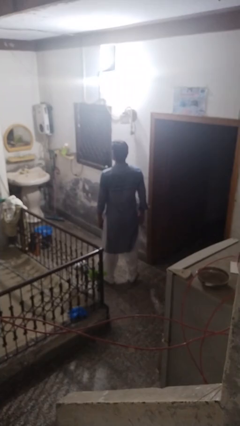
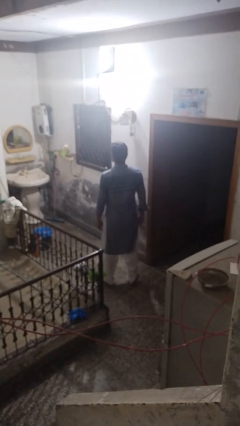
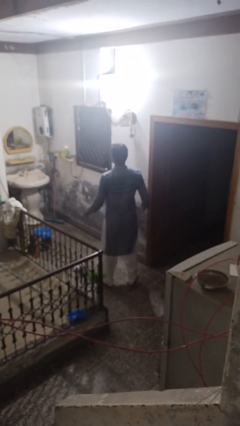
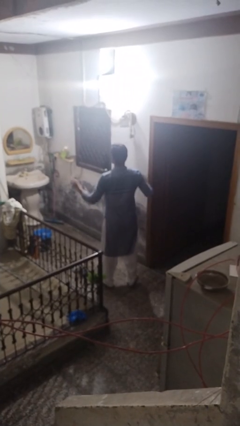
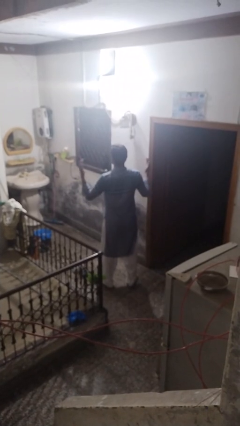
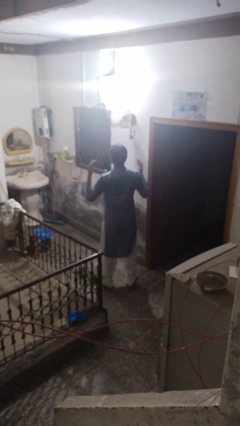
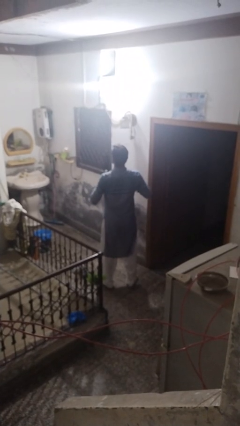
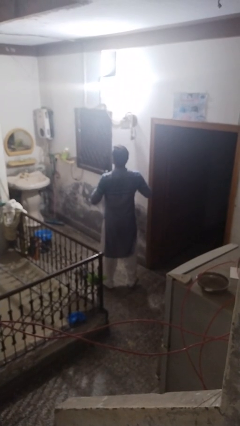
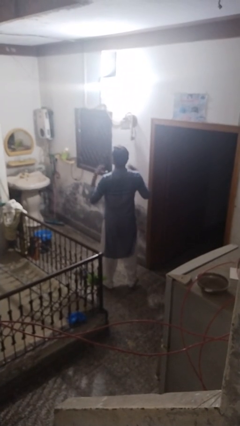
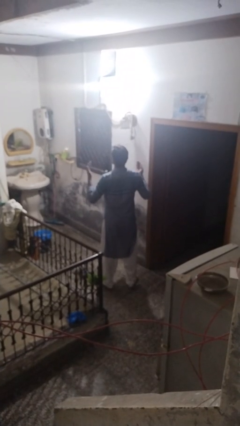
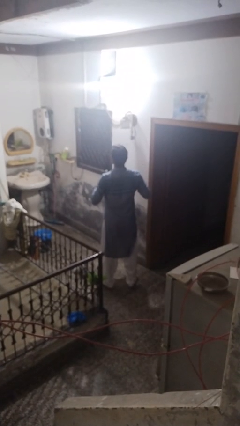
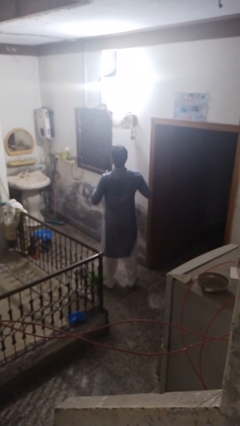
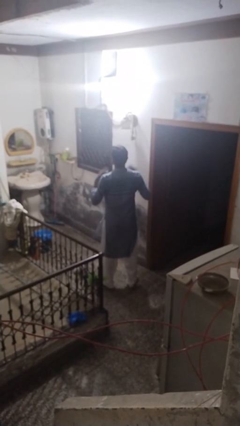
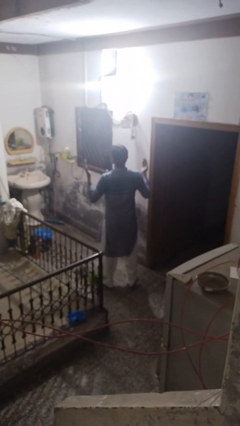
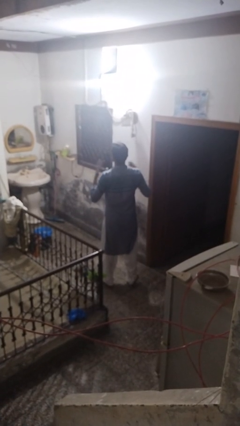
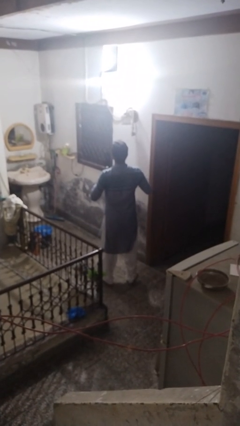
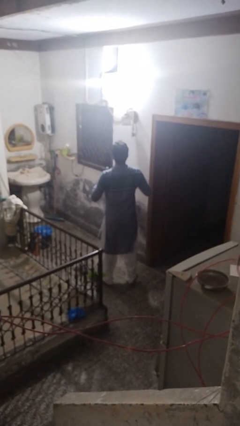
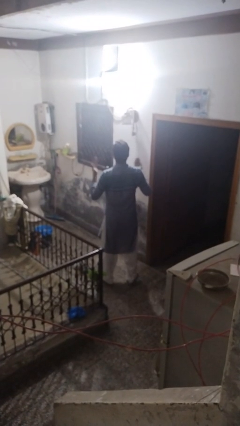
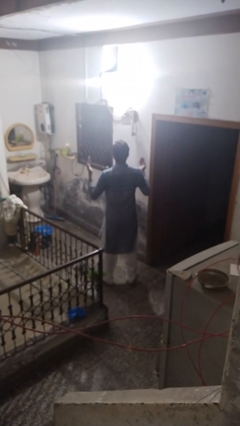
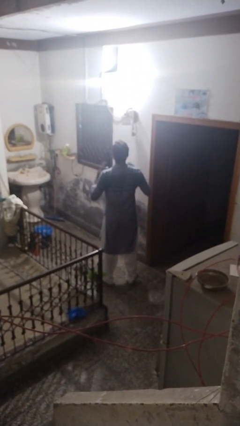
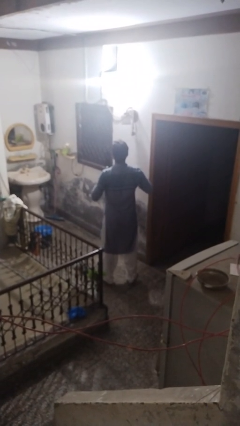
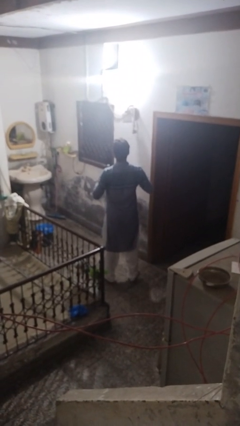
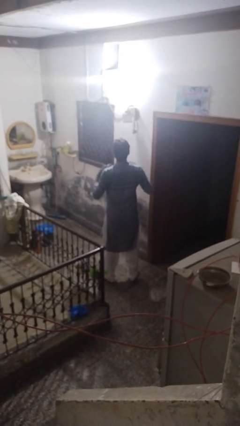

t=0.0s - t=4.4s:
person drums on chest

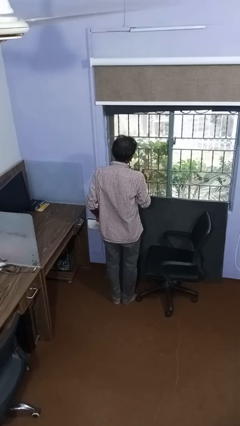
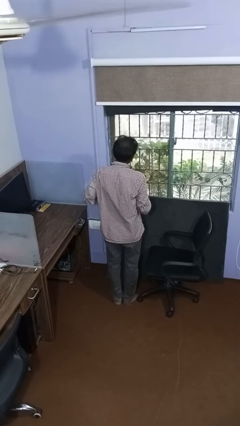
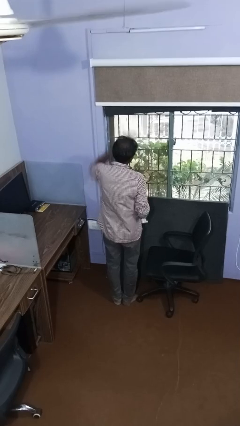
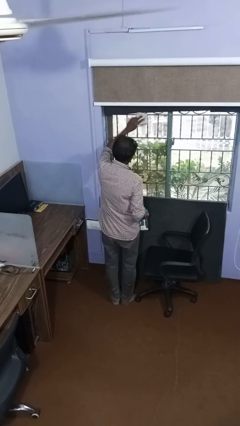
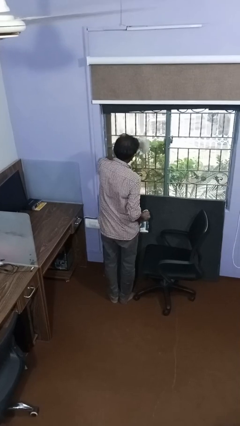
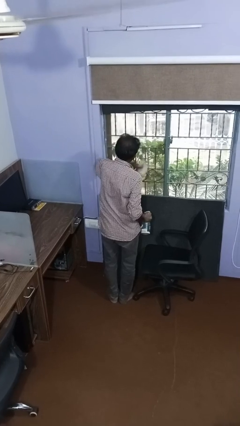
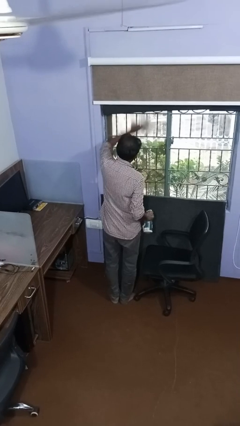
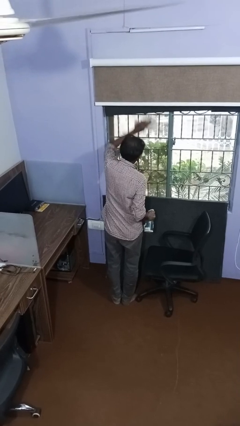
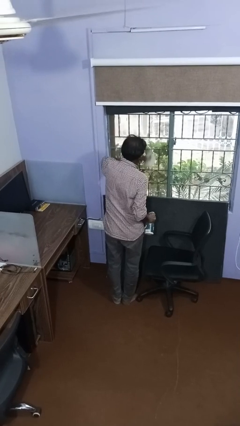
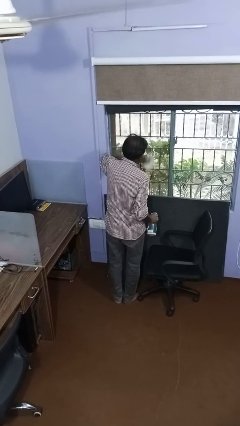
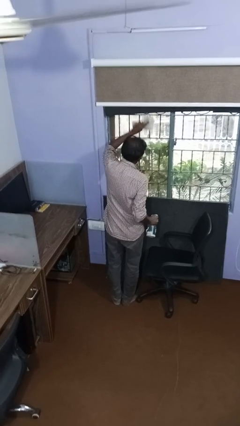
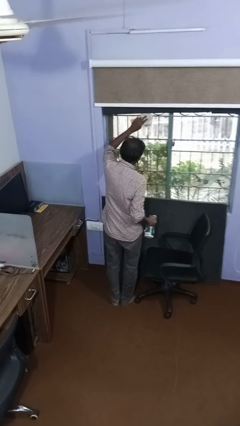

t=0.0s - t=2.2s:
person washes window

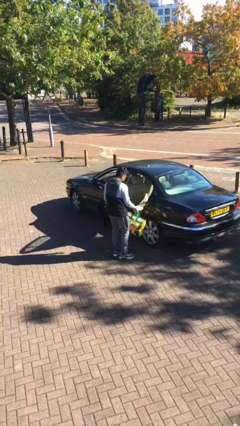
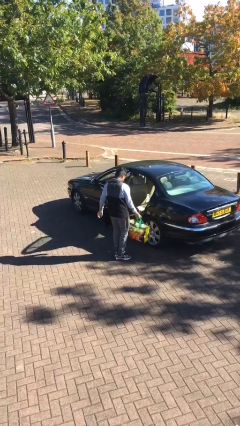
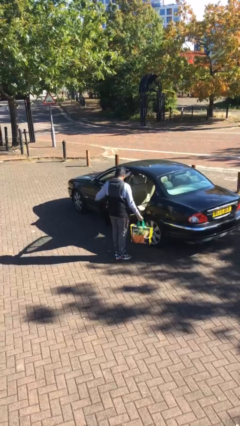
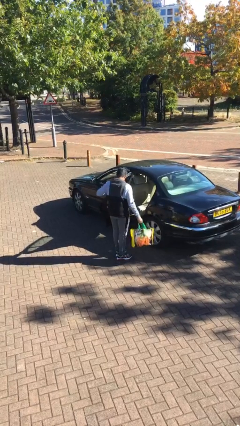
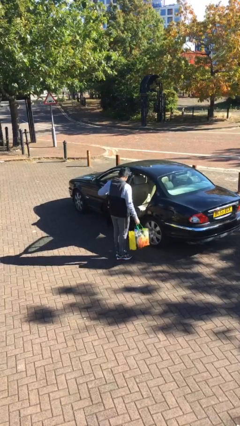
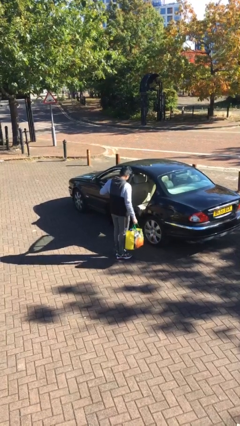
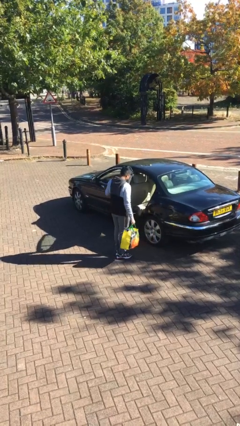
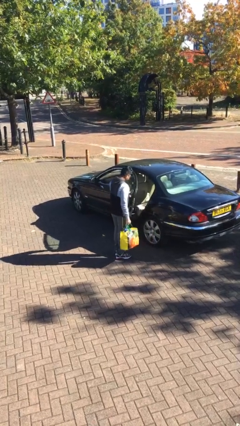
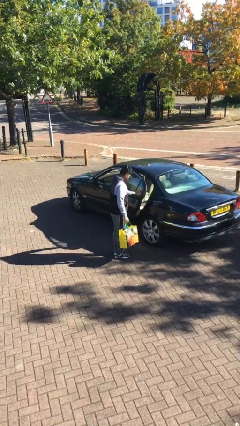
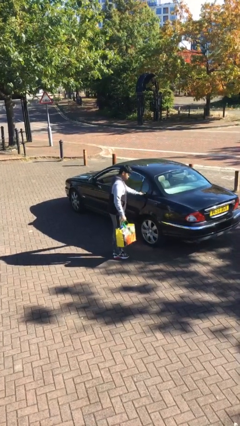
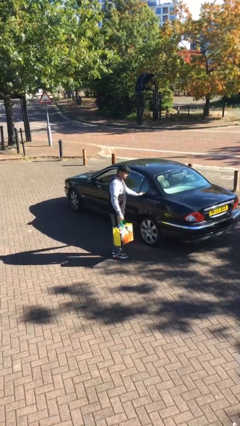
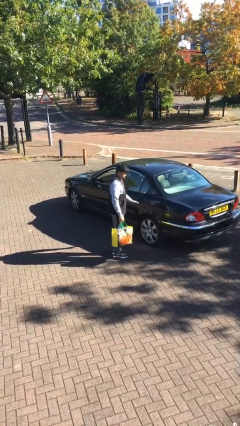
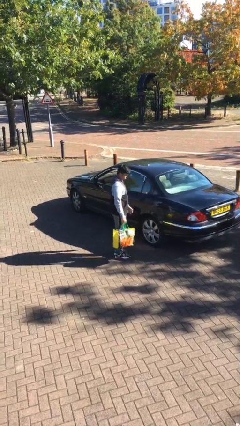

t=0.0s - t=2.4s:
person closes car door

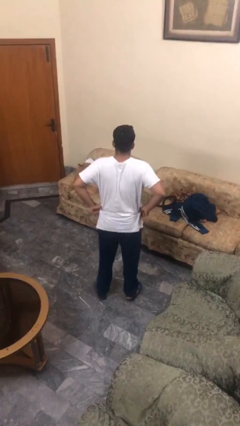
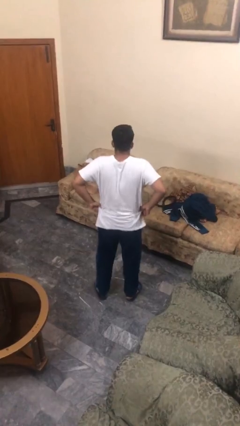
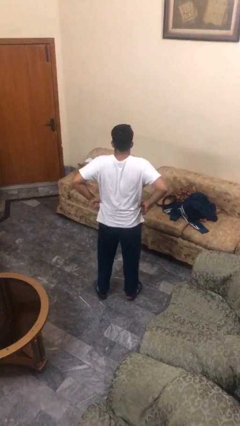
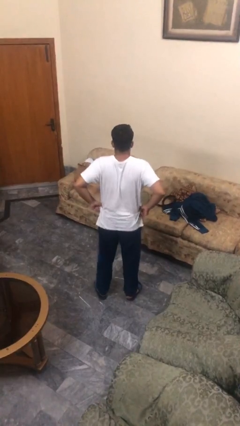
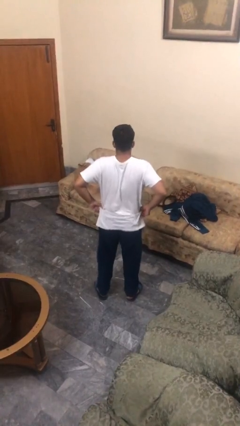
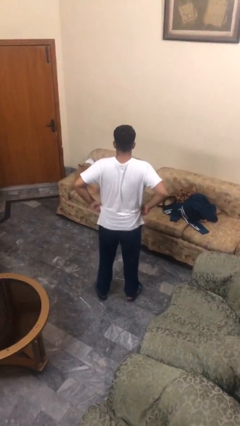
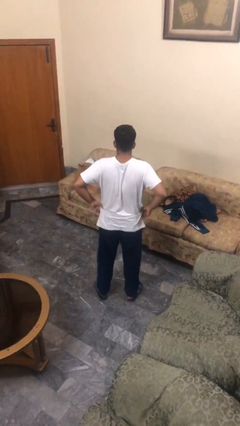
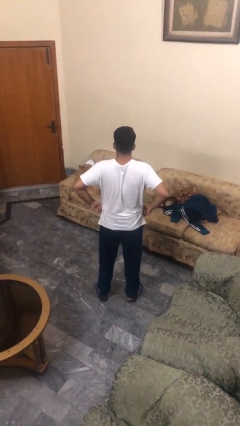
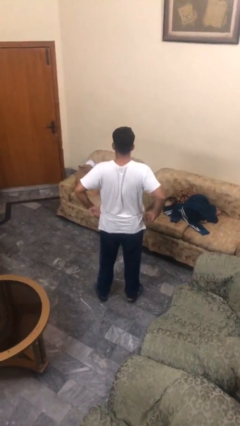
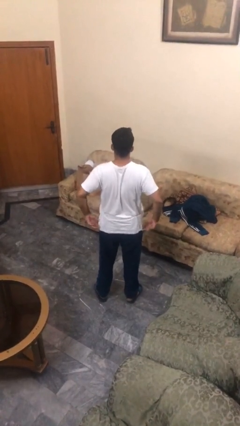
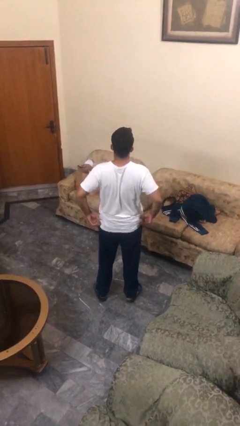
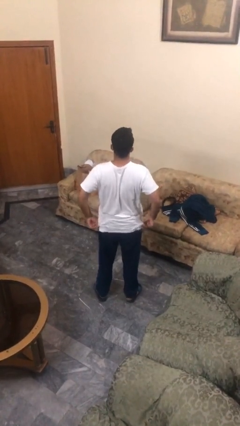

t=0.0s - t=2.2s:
person hikes up pants

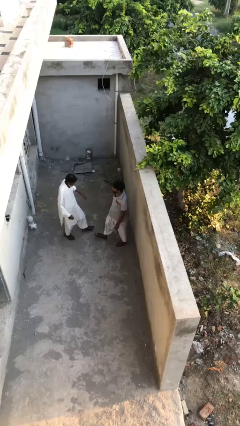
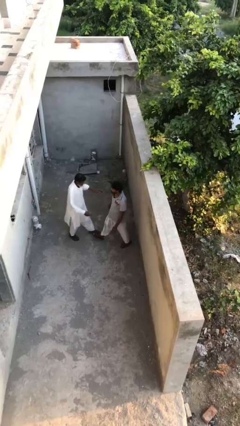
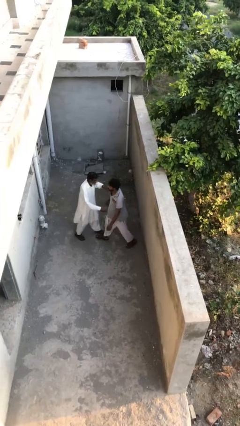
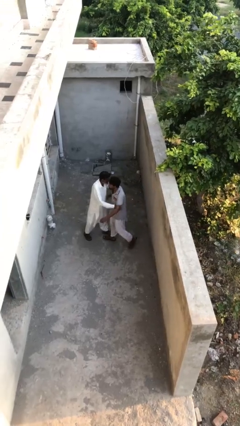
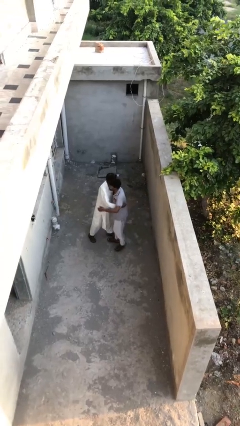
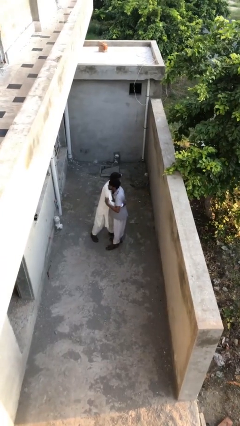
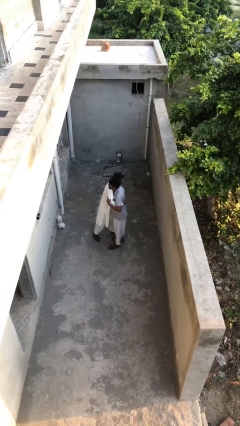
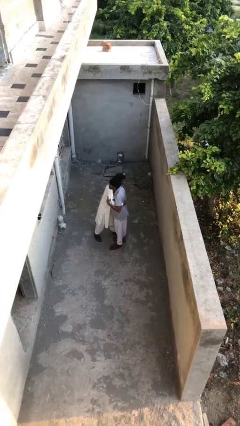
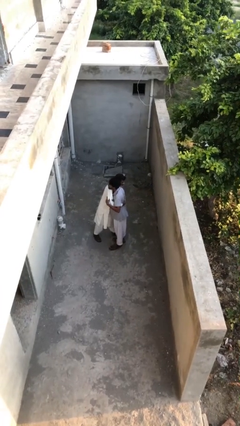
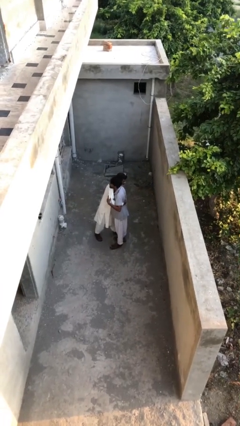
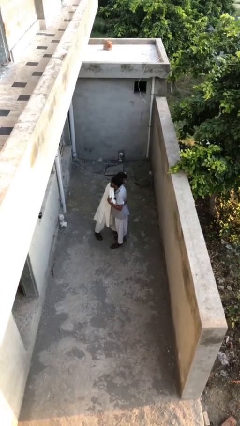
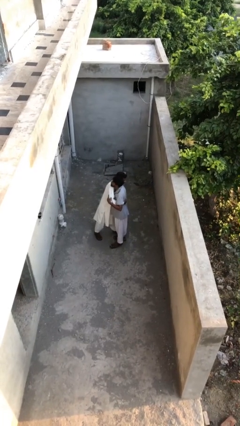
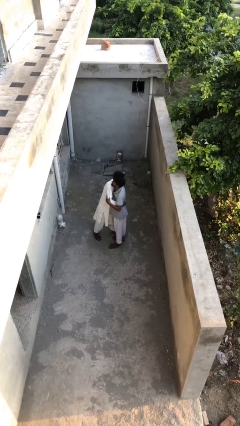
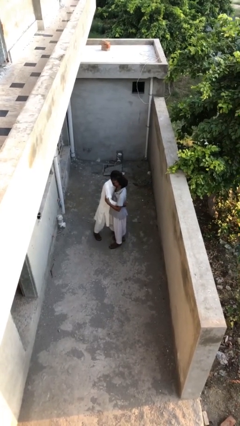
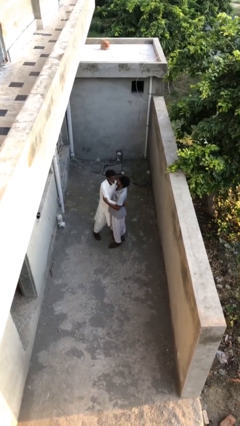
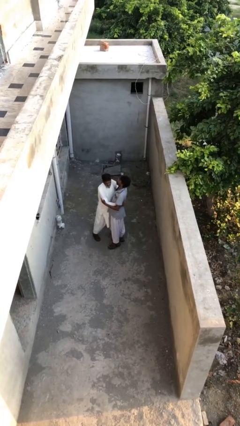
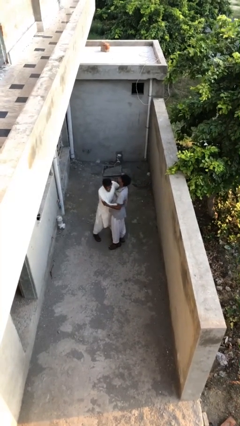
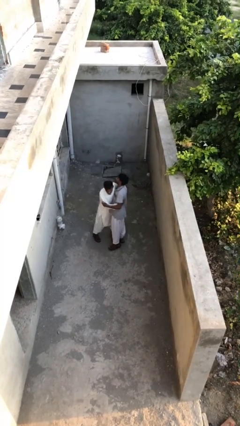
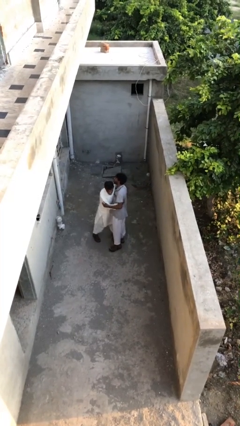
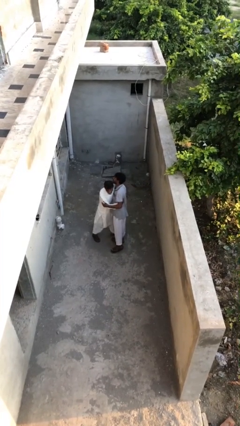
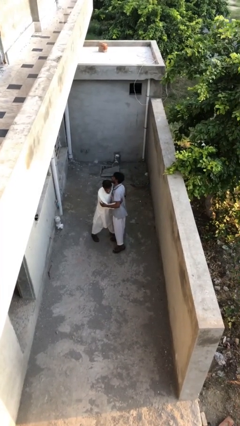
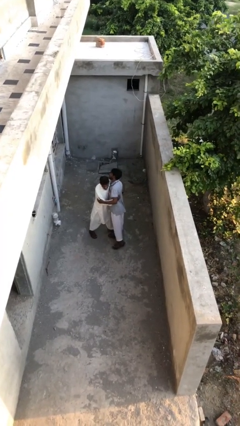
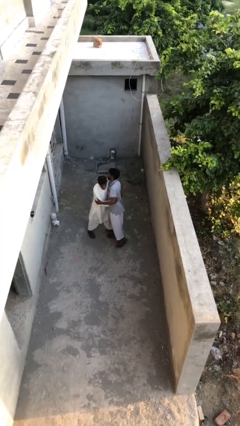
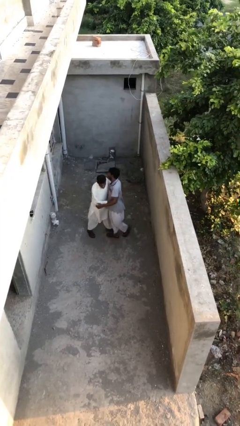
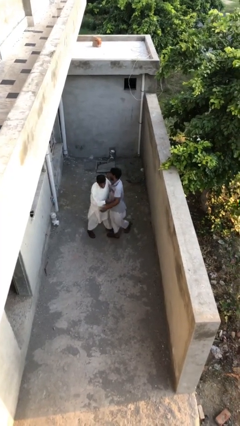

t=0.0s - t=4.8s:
person embraces person

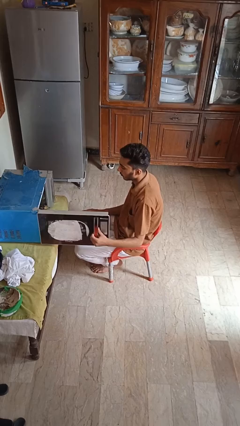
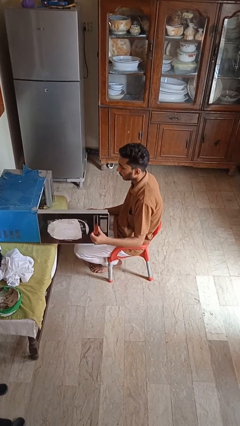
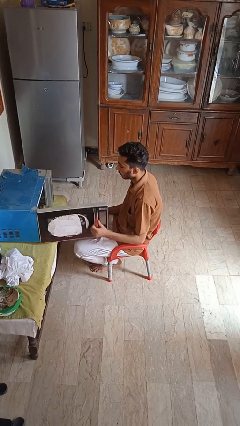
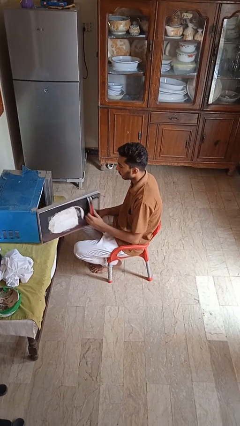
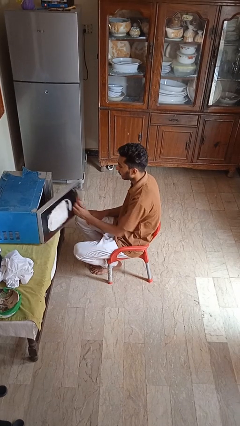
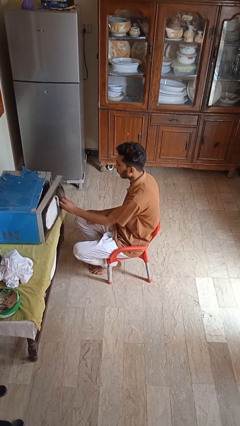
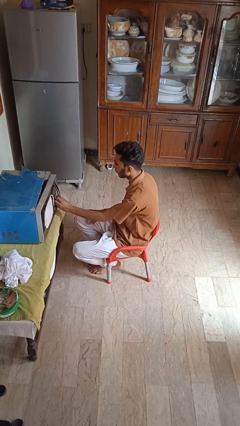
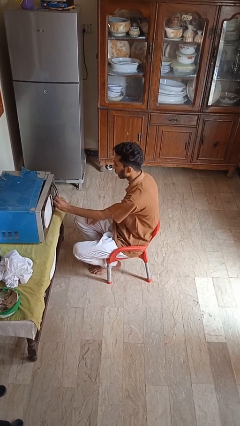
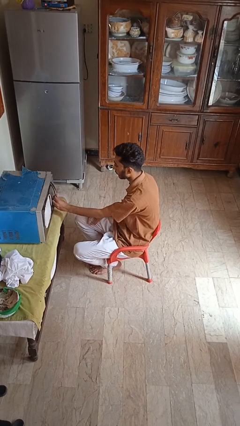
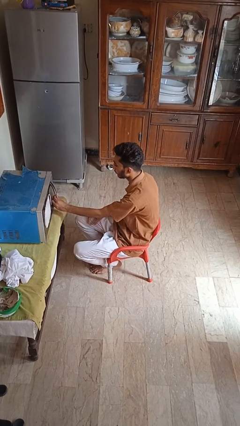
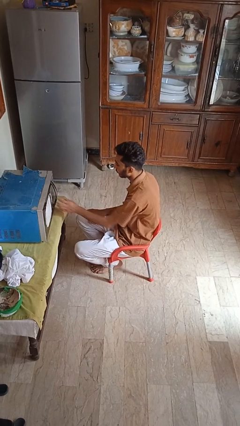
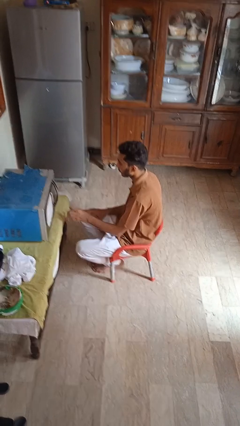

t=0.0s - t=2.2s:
person closes microwave
